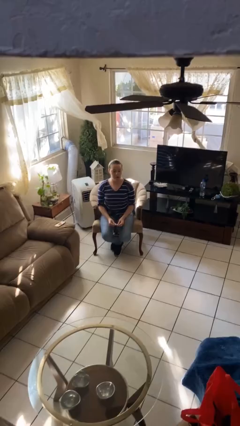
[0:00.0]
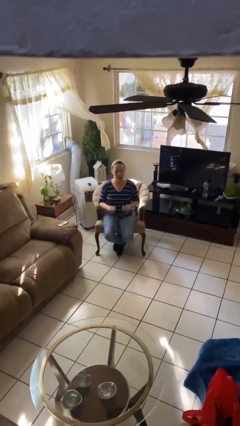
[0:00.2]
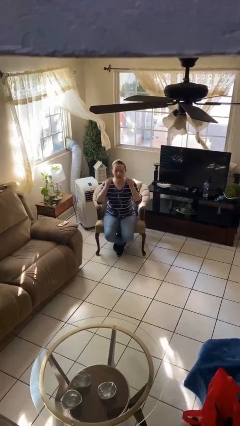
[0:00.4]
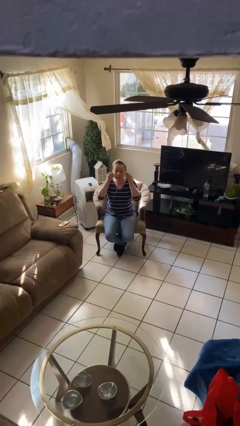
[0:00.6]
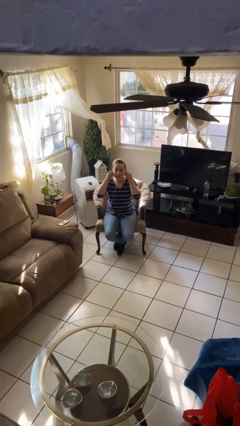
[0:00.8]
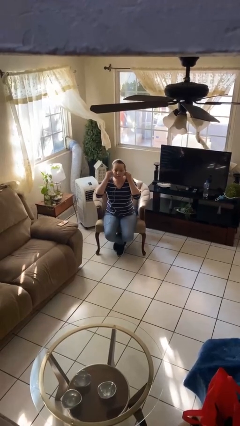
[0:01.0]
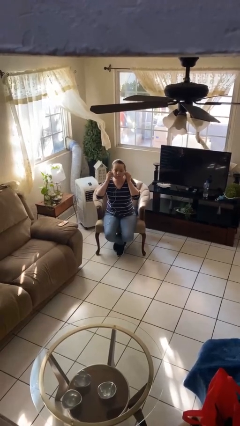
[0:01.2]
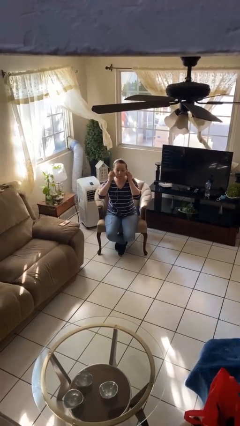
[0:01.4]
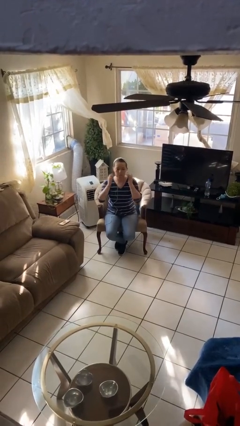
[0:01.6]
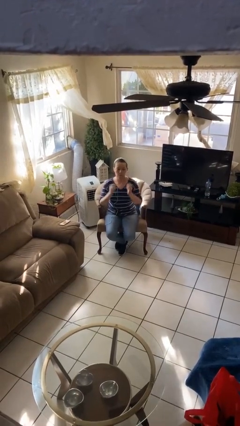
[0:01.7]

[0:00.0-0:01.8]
person puts on headphones

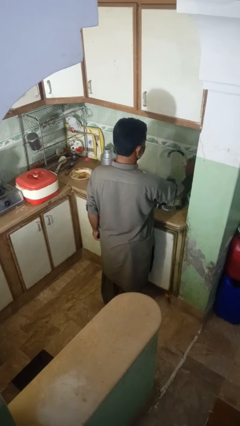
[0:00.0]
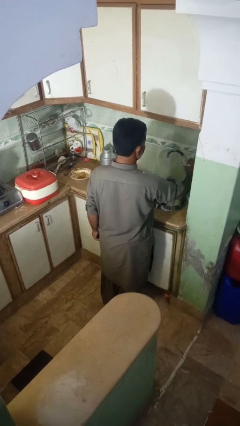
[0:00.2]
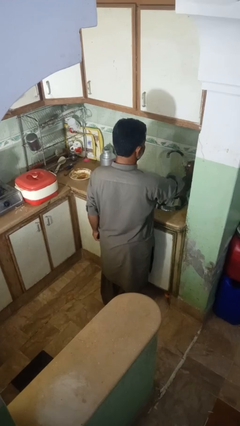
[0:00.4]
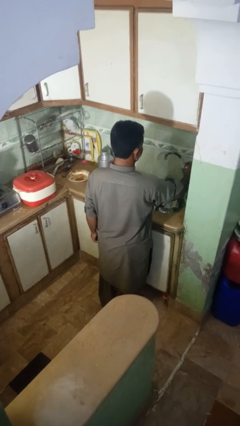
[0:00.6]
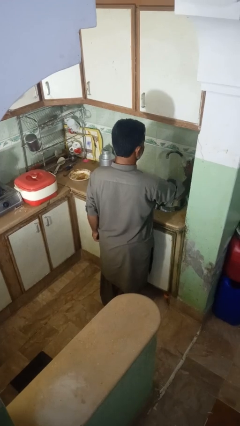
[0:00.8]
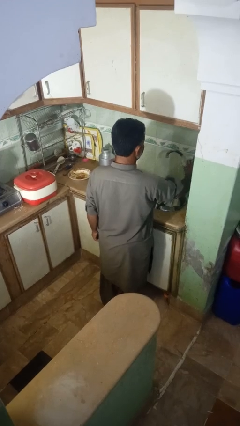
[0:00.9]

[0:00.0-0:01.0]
person turns off faucet

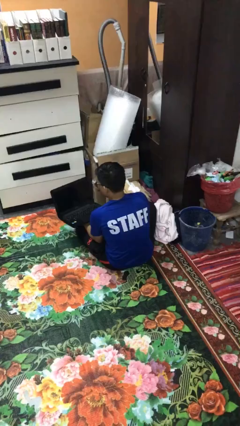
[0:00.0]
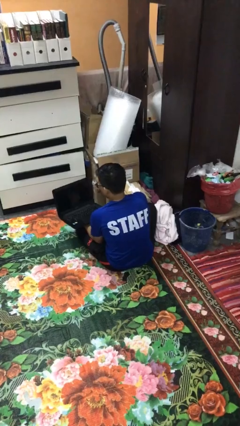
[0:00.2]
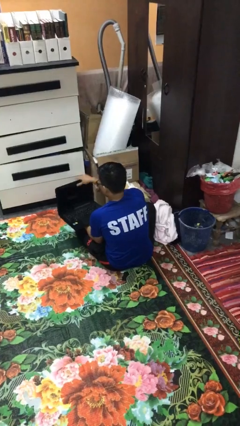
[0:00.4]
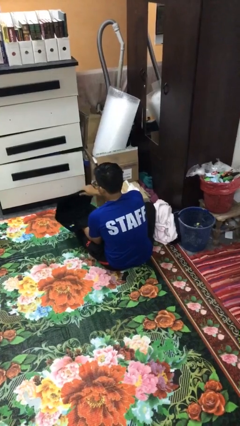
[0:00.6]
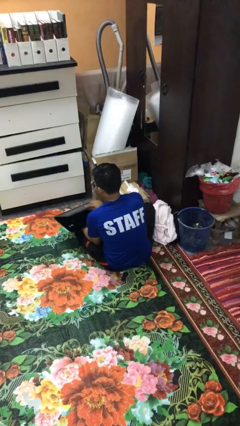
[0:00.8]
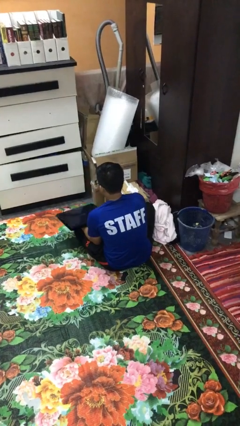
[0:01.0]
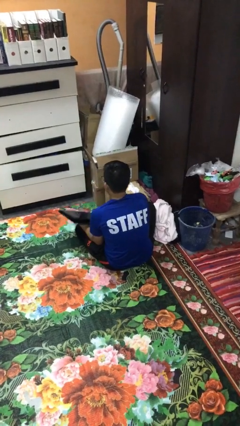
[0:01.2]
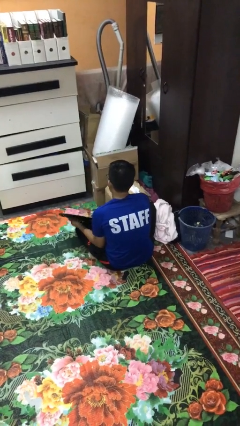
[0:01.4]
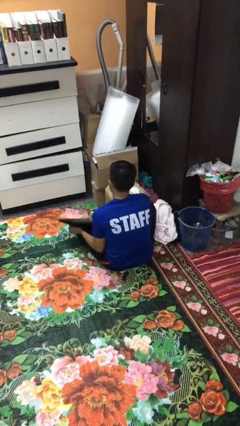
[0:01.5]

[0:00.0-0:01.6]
person closes laptop

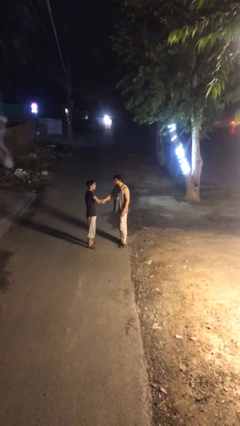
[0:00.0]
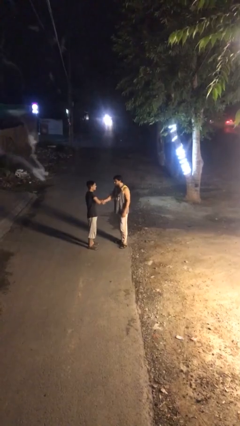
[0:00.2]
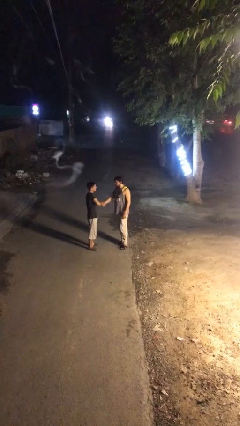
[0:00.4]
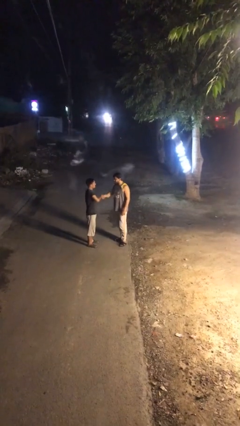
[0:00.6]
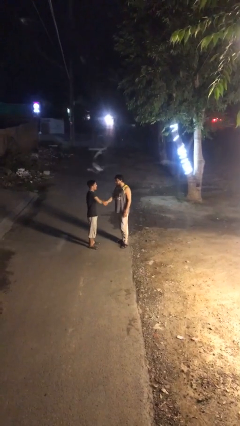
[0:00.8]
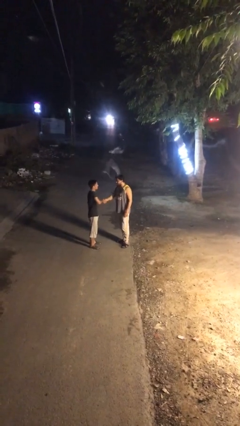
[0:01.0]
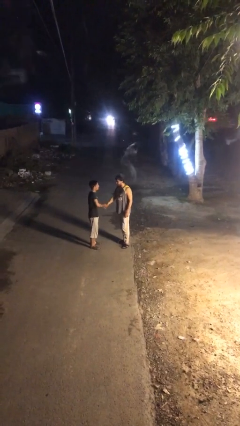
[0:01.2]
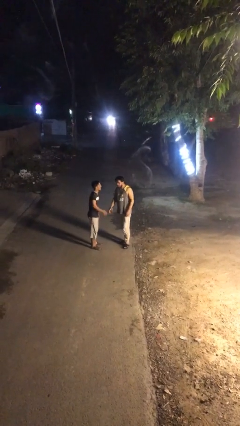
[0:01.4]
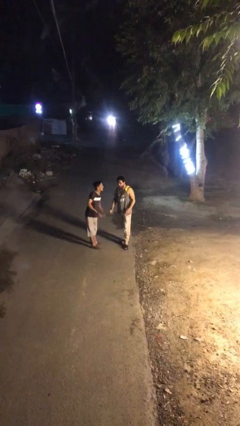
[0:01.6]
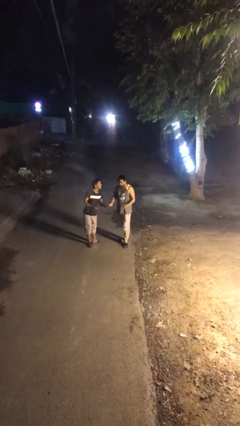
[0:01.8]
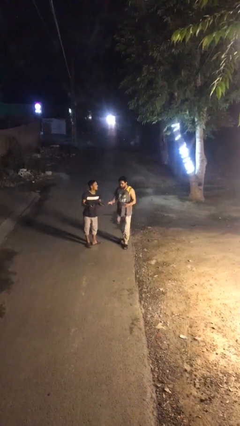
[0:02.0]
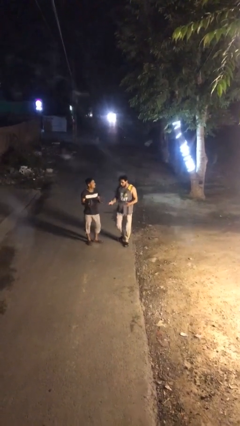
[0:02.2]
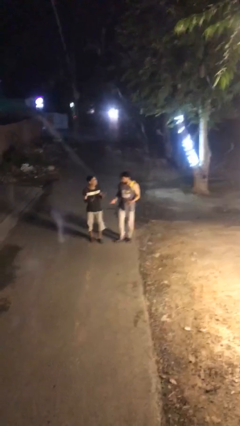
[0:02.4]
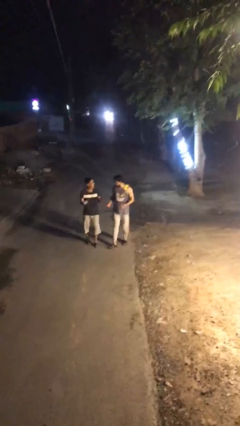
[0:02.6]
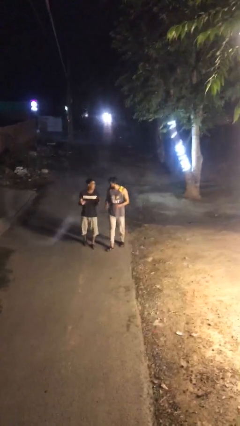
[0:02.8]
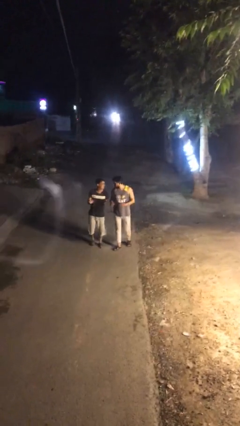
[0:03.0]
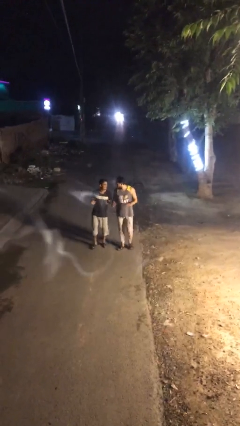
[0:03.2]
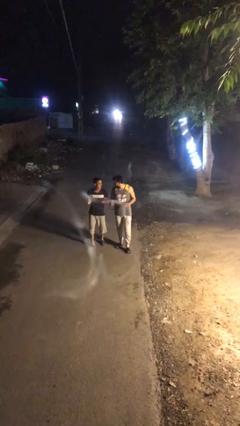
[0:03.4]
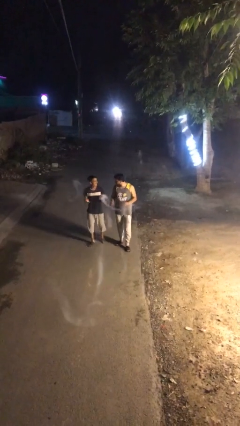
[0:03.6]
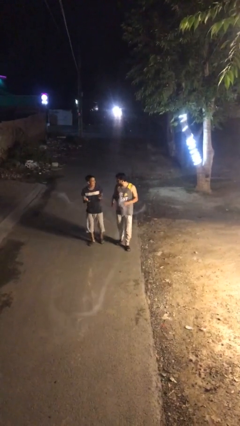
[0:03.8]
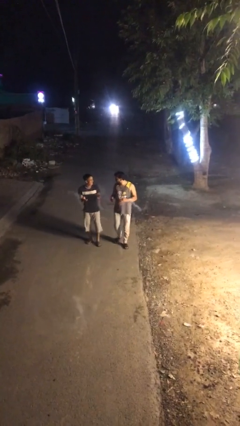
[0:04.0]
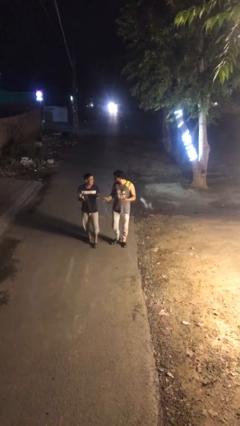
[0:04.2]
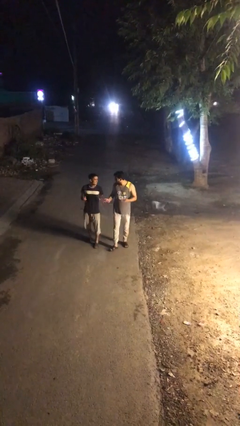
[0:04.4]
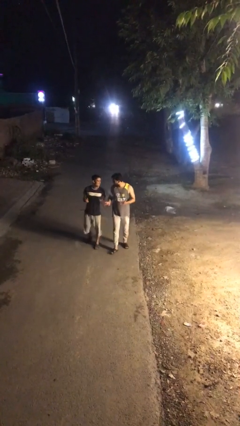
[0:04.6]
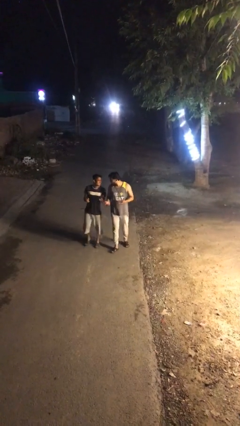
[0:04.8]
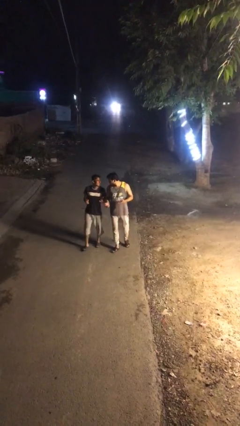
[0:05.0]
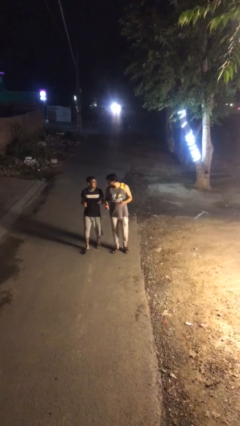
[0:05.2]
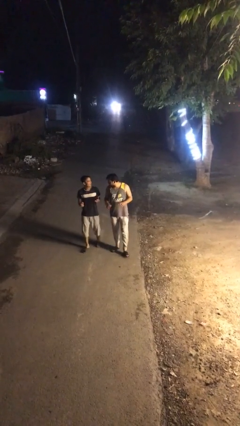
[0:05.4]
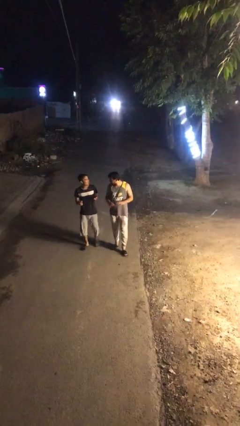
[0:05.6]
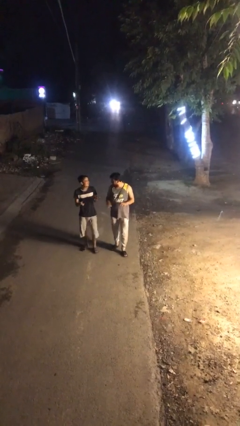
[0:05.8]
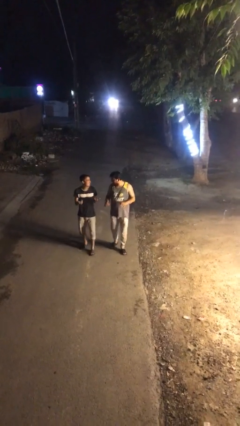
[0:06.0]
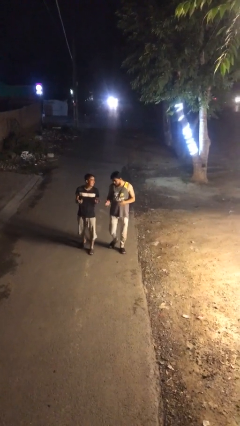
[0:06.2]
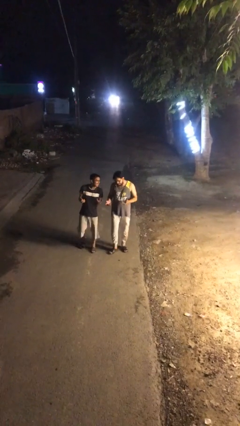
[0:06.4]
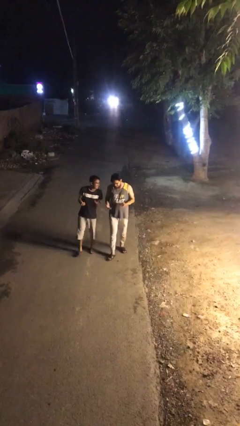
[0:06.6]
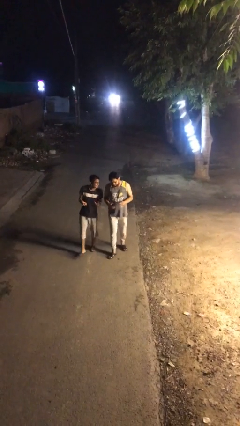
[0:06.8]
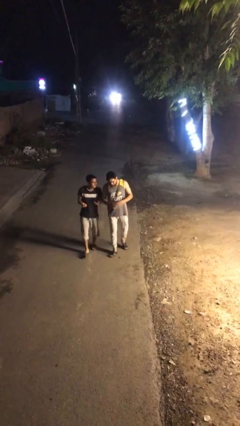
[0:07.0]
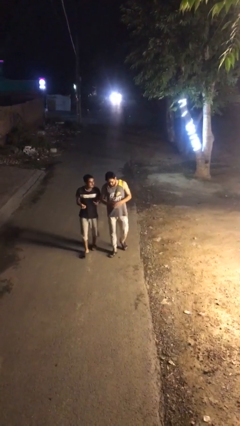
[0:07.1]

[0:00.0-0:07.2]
person talks to person

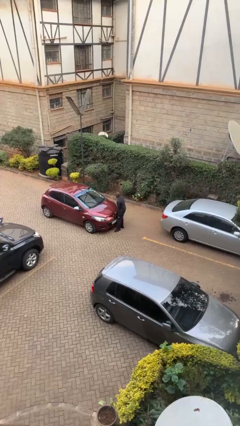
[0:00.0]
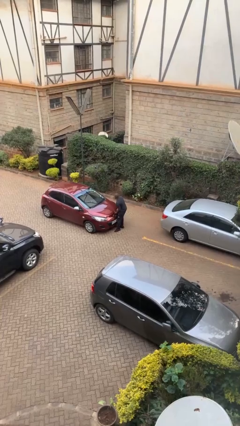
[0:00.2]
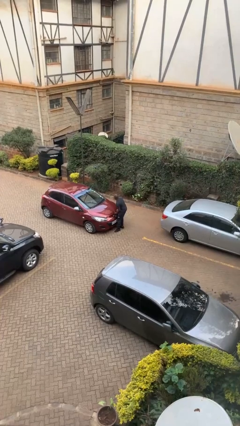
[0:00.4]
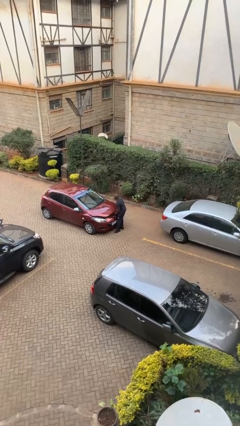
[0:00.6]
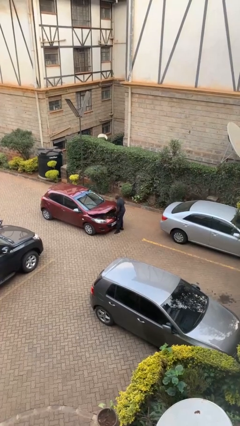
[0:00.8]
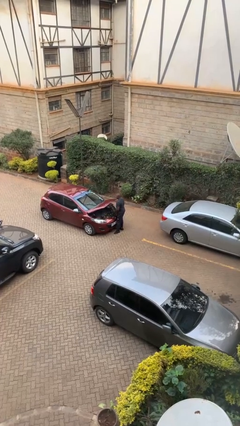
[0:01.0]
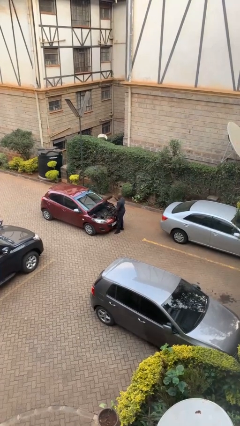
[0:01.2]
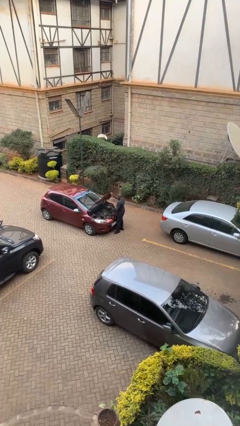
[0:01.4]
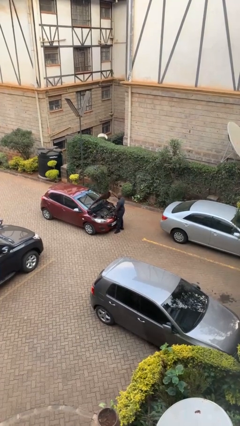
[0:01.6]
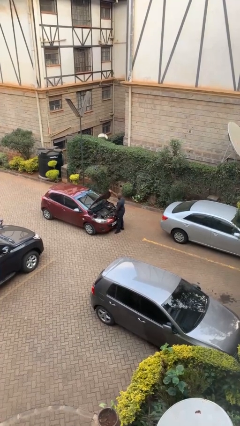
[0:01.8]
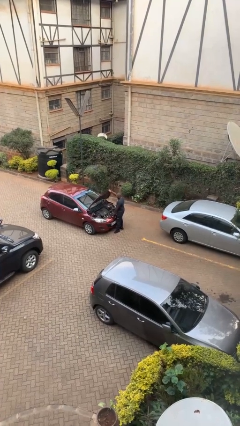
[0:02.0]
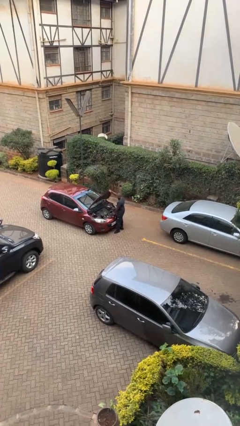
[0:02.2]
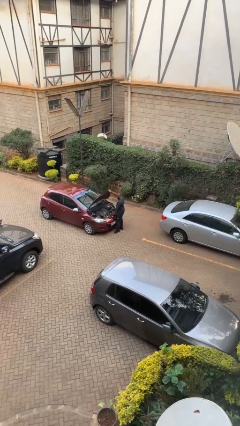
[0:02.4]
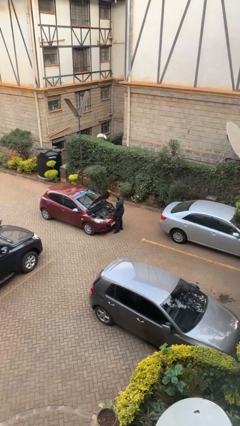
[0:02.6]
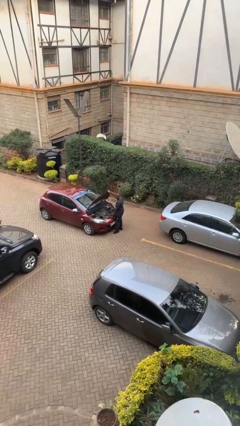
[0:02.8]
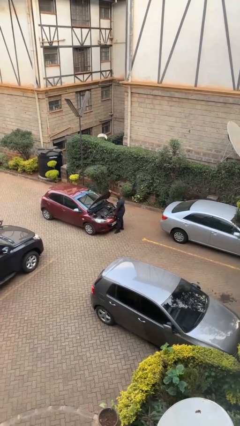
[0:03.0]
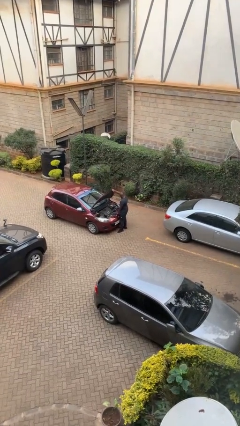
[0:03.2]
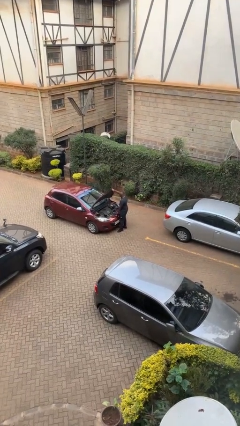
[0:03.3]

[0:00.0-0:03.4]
person opens car hood

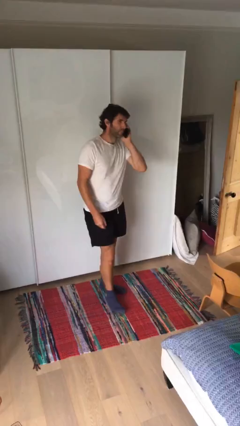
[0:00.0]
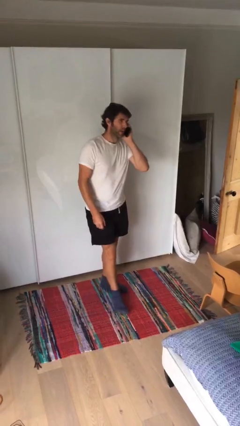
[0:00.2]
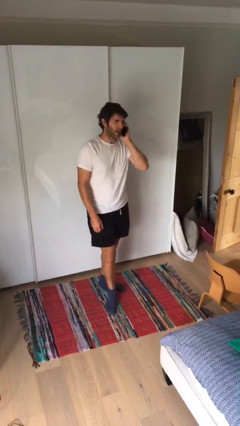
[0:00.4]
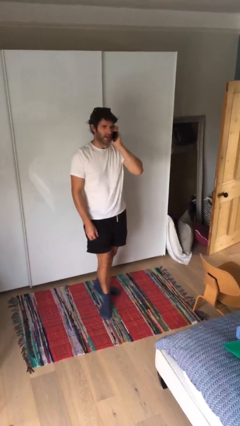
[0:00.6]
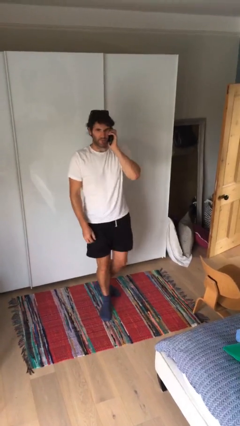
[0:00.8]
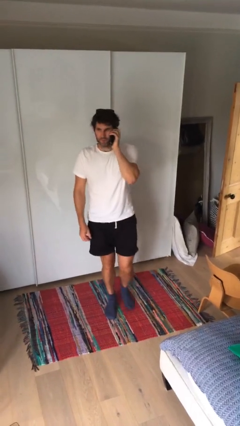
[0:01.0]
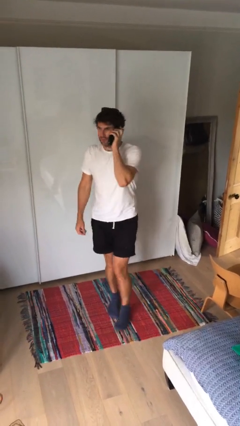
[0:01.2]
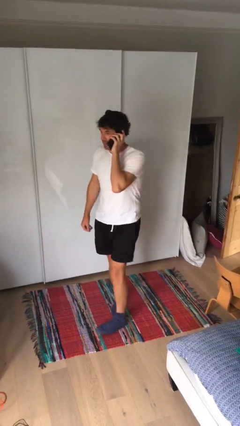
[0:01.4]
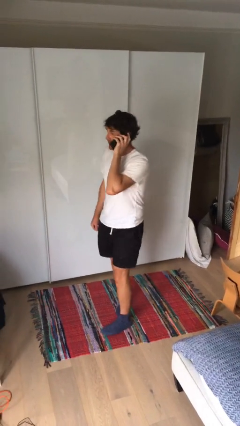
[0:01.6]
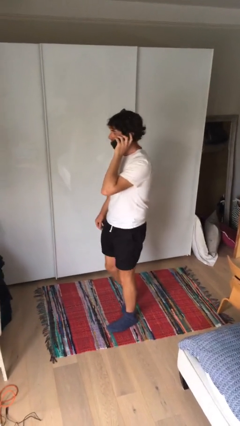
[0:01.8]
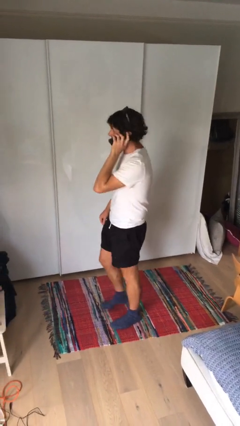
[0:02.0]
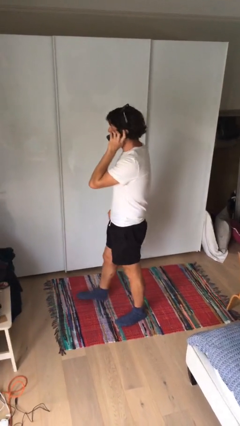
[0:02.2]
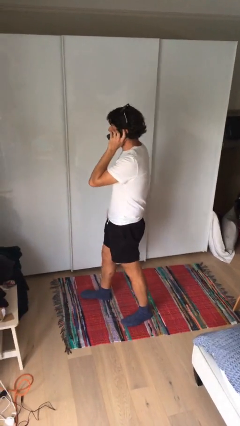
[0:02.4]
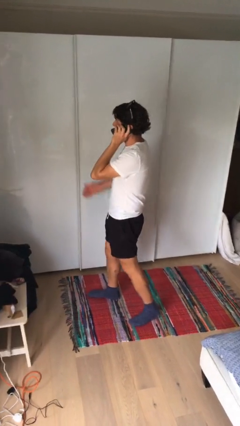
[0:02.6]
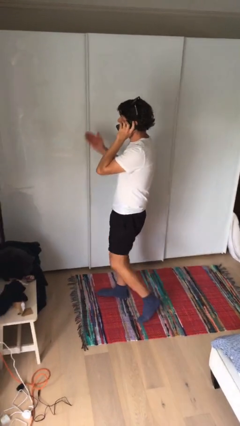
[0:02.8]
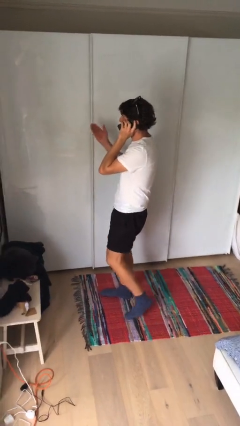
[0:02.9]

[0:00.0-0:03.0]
person talks on phone
